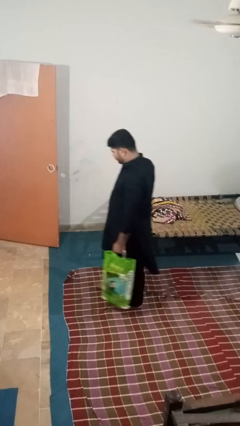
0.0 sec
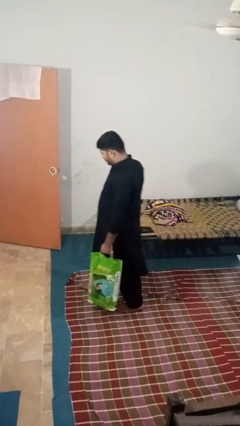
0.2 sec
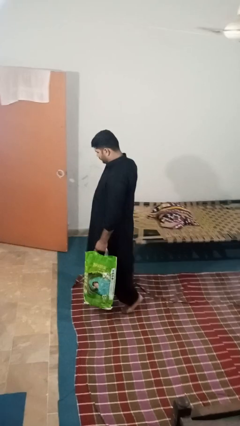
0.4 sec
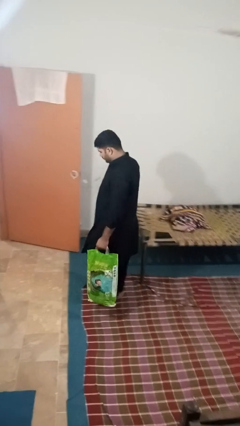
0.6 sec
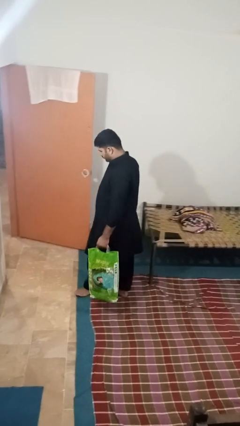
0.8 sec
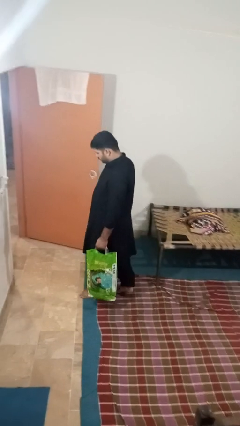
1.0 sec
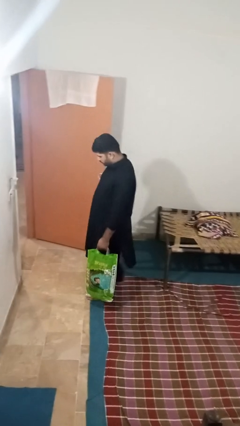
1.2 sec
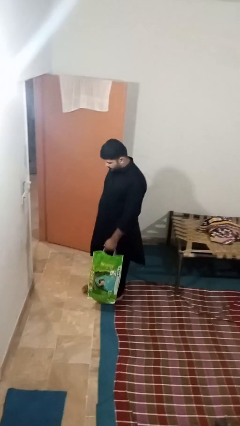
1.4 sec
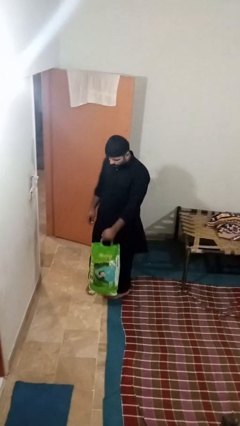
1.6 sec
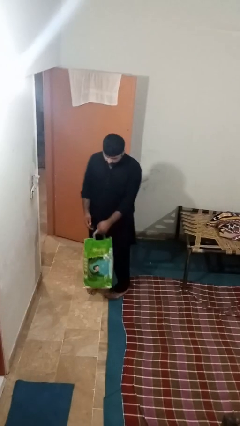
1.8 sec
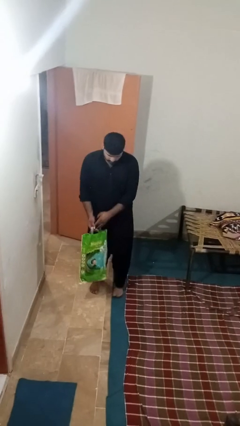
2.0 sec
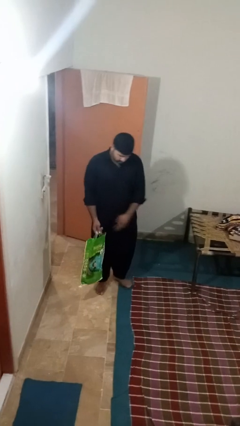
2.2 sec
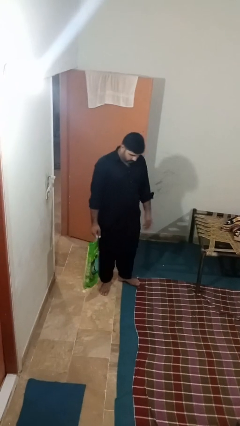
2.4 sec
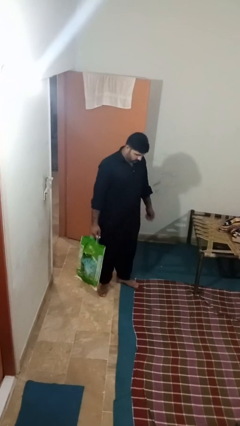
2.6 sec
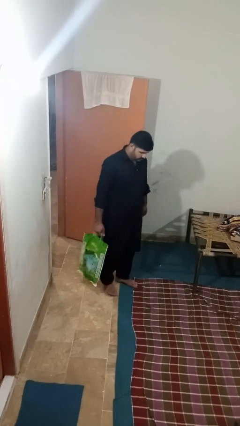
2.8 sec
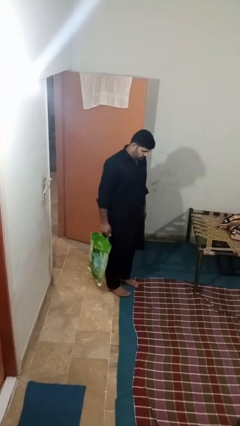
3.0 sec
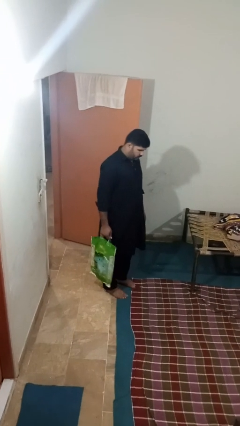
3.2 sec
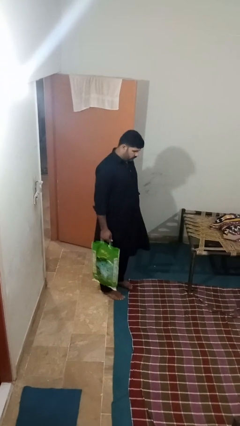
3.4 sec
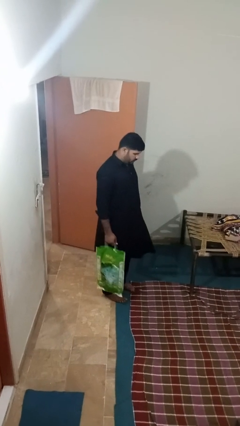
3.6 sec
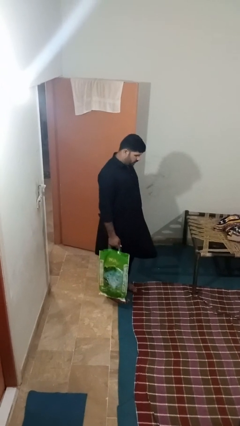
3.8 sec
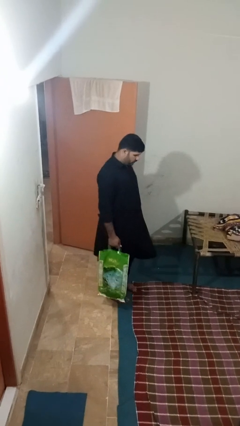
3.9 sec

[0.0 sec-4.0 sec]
person carries groceries

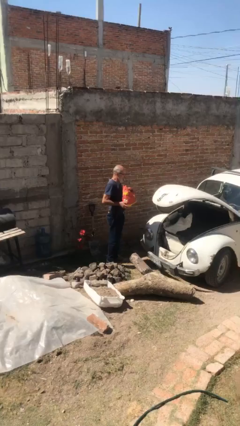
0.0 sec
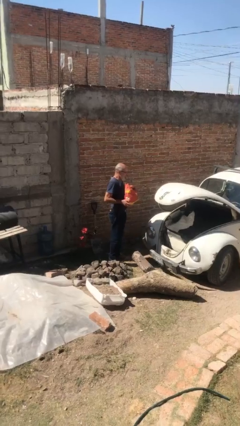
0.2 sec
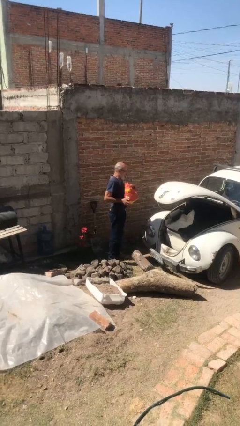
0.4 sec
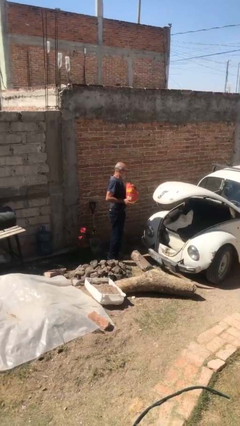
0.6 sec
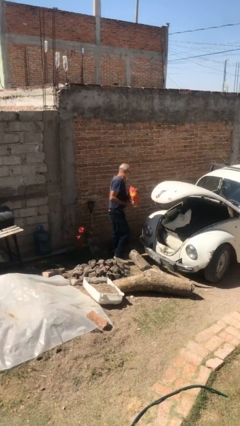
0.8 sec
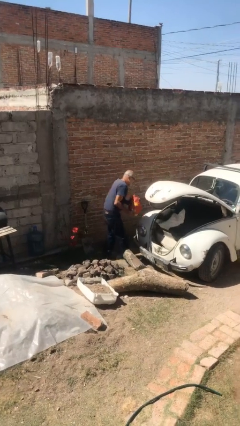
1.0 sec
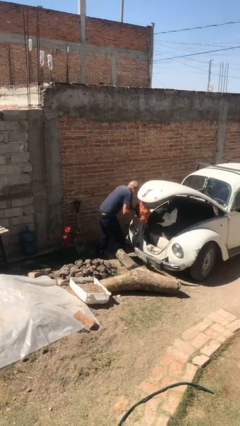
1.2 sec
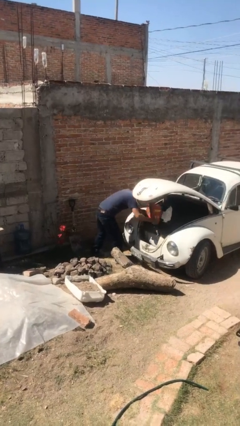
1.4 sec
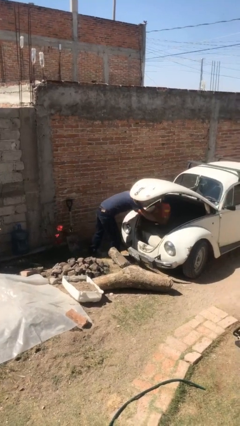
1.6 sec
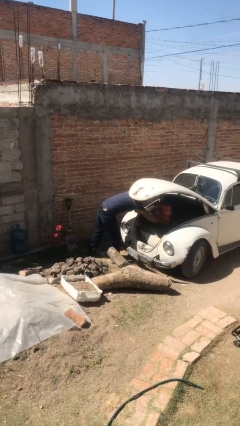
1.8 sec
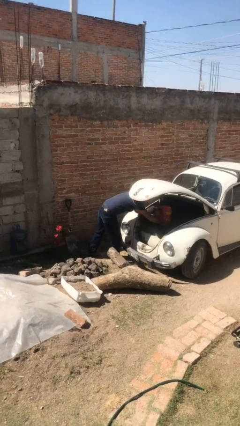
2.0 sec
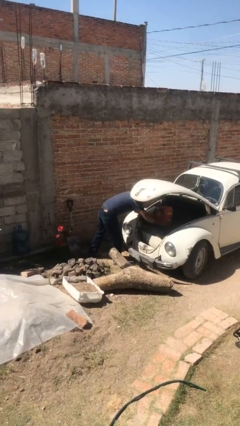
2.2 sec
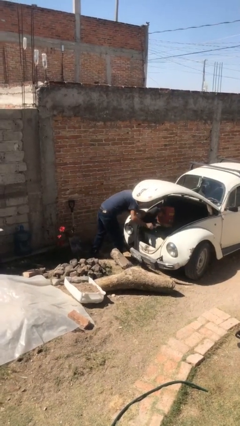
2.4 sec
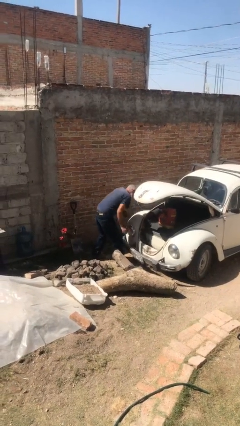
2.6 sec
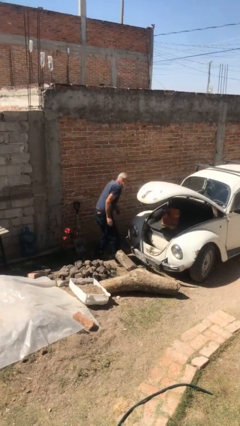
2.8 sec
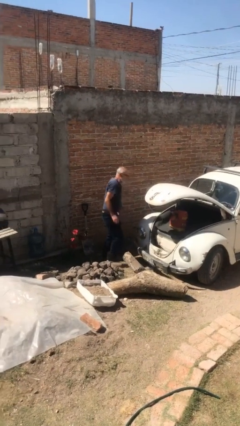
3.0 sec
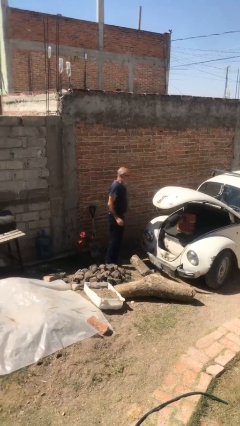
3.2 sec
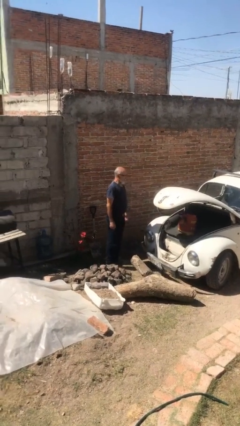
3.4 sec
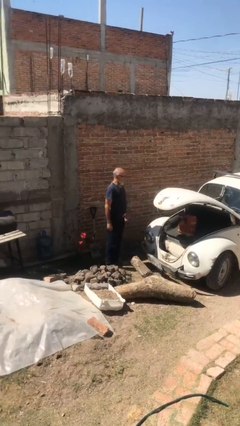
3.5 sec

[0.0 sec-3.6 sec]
person loads car

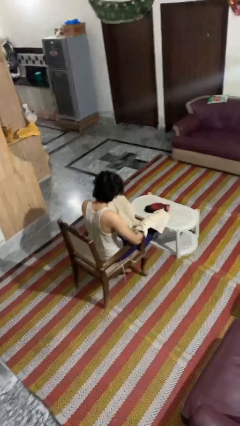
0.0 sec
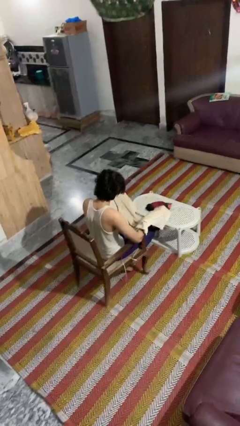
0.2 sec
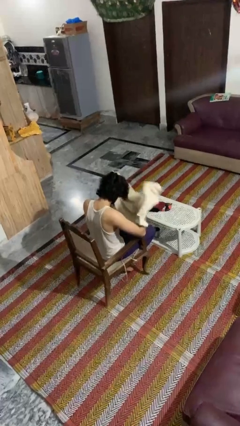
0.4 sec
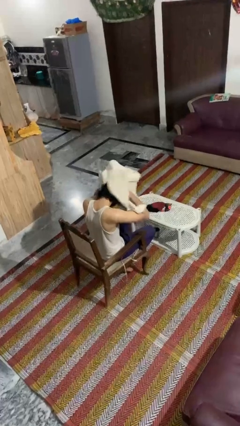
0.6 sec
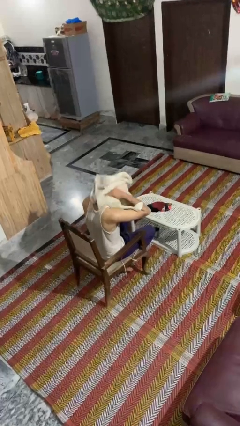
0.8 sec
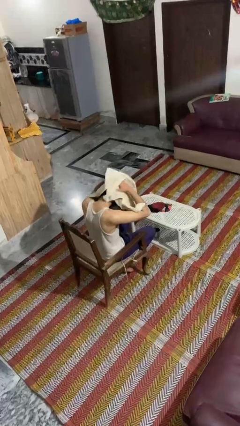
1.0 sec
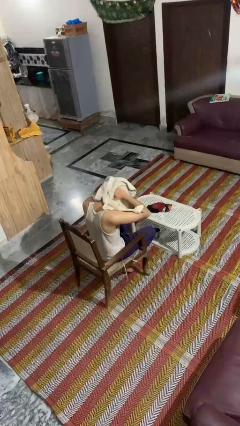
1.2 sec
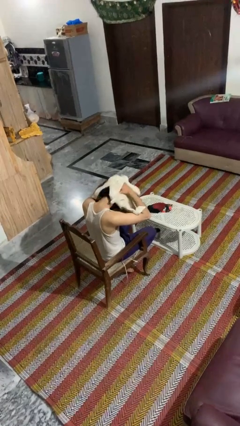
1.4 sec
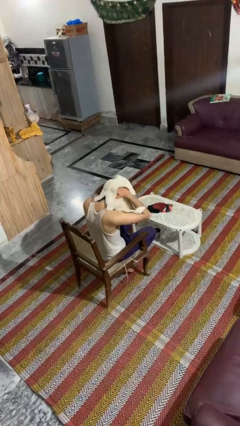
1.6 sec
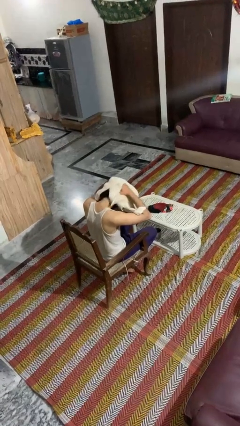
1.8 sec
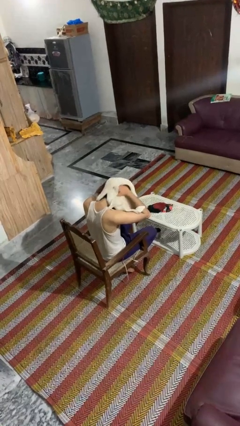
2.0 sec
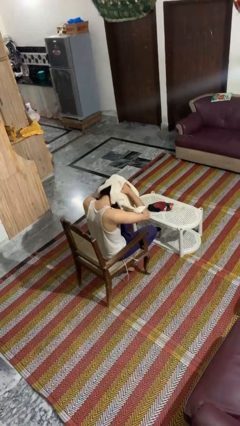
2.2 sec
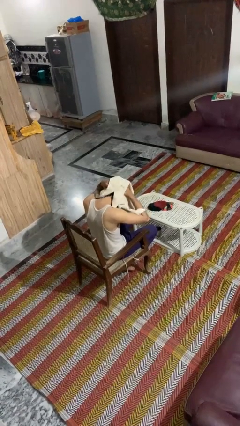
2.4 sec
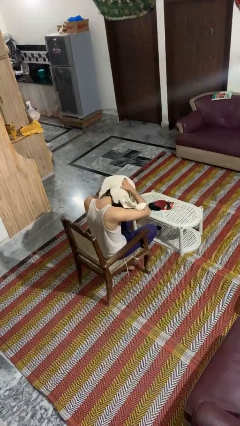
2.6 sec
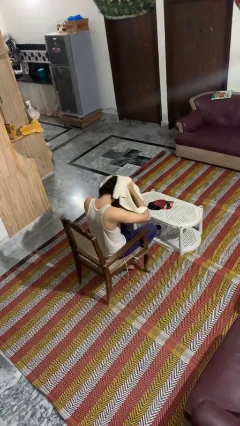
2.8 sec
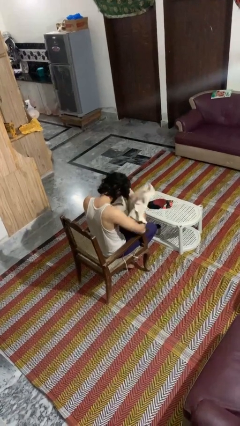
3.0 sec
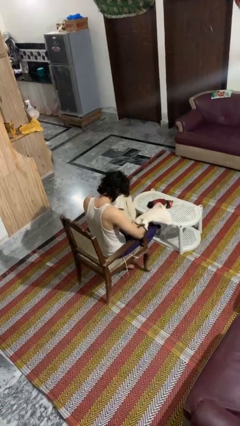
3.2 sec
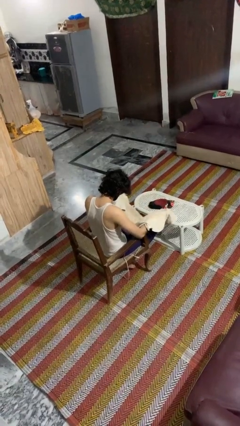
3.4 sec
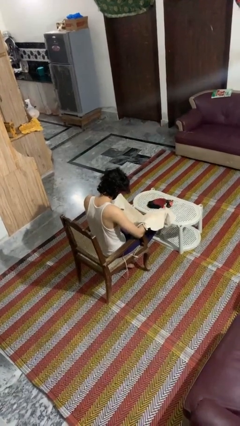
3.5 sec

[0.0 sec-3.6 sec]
person dries hair with towel

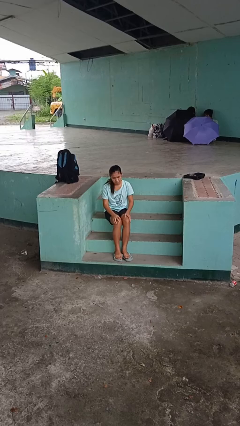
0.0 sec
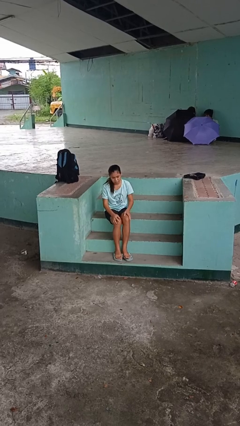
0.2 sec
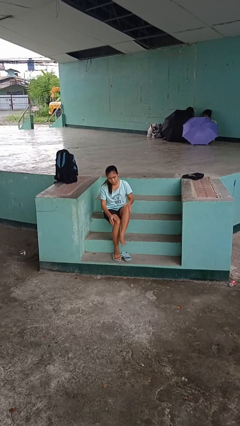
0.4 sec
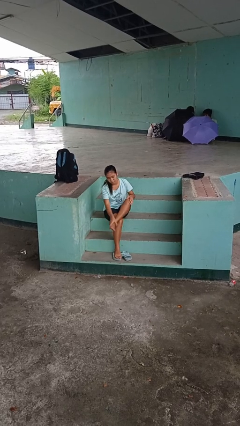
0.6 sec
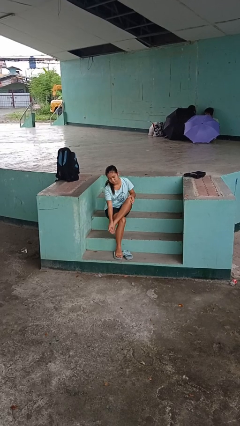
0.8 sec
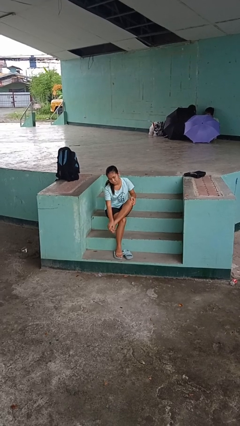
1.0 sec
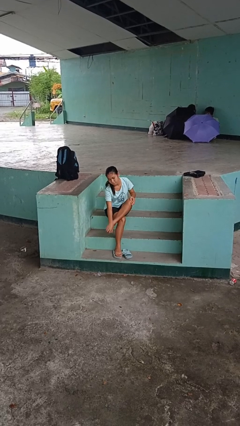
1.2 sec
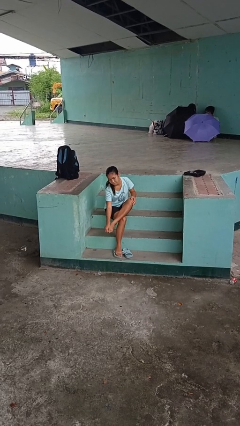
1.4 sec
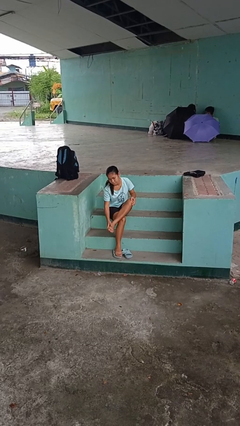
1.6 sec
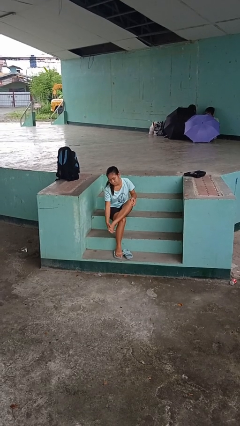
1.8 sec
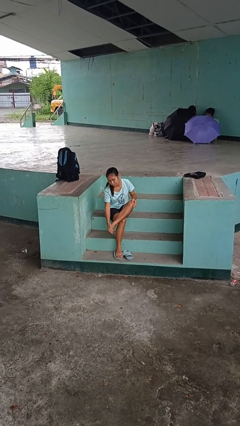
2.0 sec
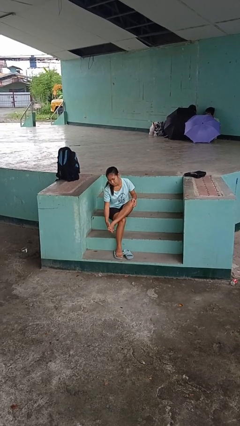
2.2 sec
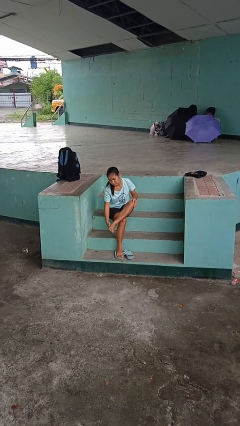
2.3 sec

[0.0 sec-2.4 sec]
person rubs foot

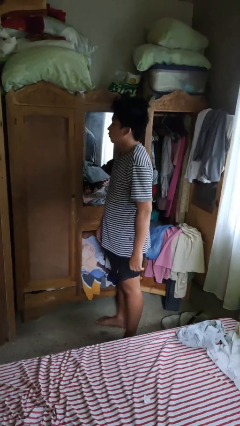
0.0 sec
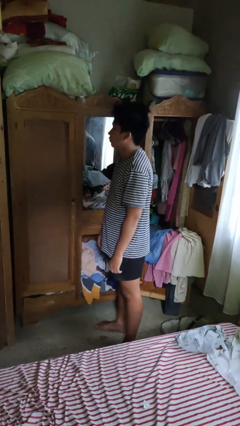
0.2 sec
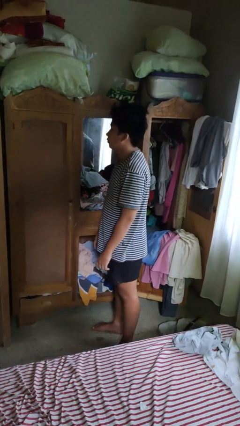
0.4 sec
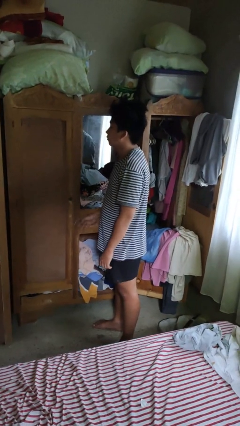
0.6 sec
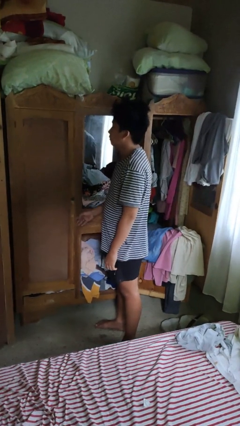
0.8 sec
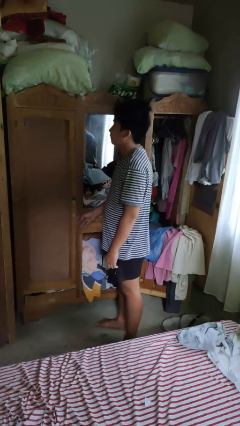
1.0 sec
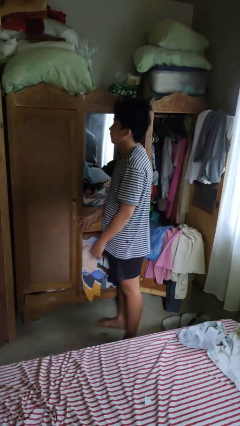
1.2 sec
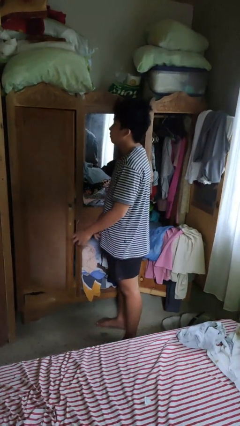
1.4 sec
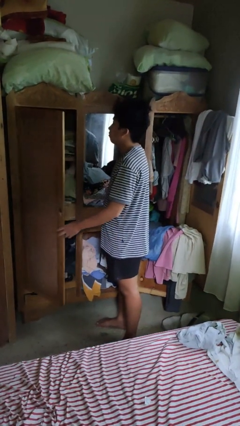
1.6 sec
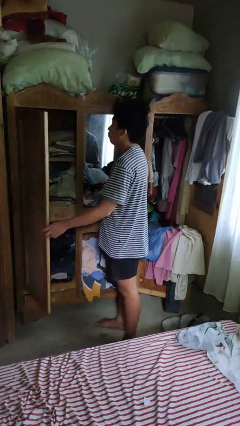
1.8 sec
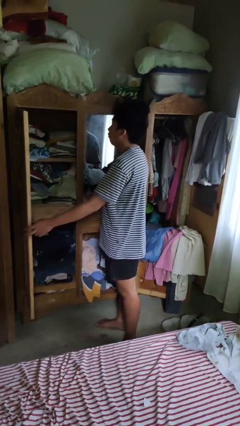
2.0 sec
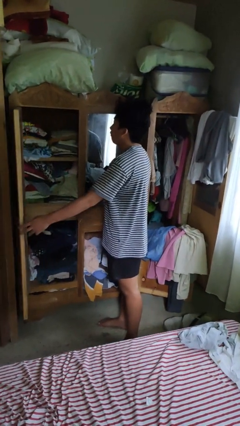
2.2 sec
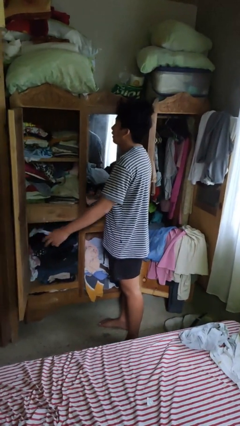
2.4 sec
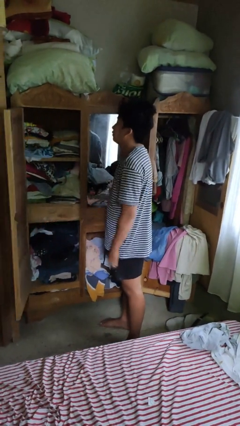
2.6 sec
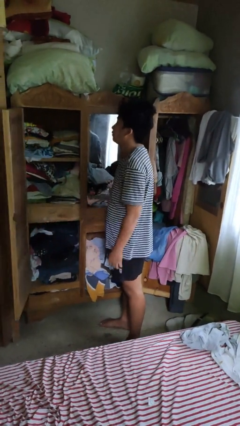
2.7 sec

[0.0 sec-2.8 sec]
person opens dresser drawer

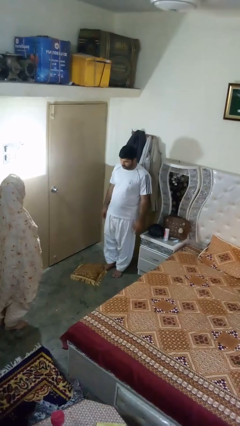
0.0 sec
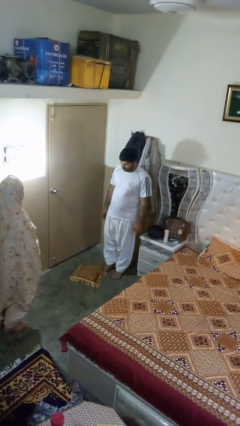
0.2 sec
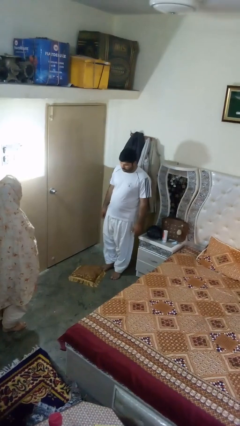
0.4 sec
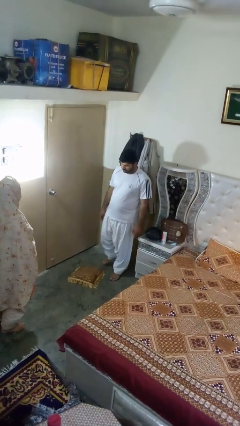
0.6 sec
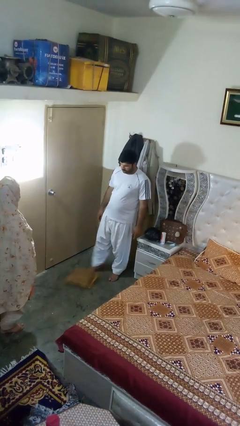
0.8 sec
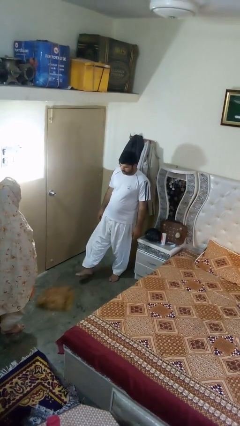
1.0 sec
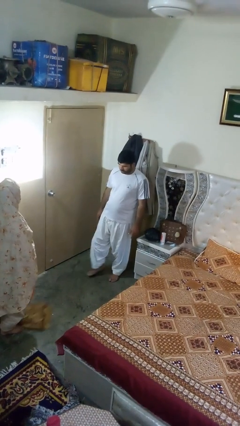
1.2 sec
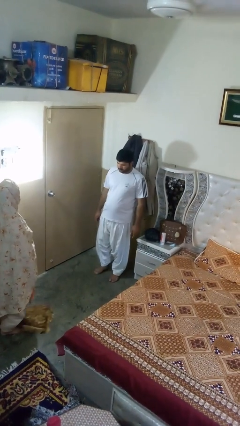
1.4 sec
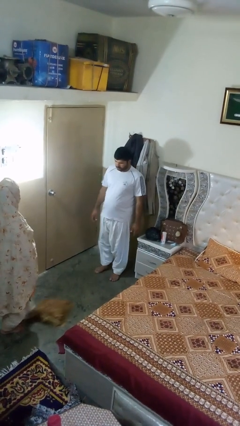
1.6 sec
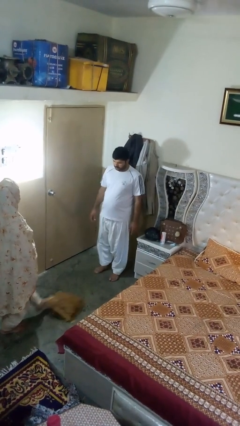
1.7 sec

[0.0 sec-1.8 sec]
person kicks object to person
